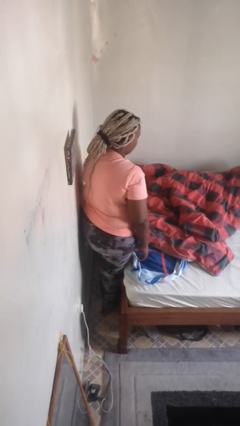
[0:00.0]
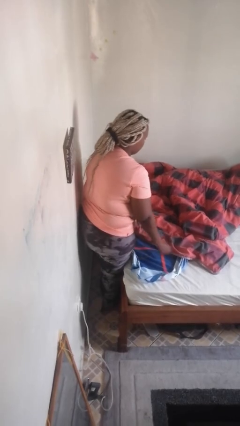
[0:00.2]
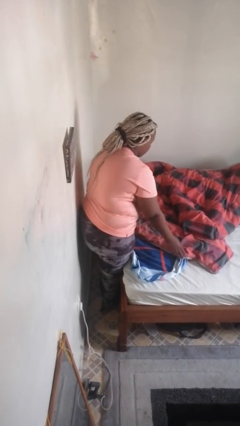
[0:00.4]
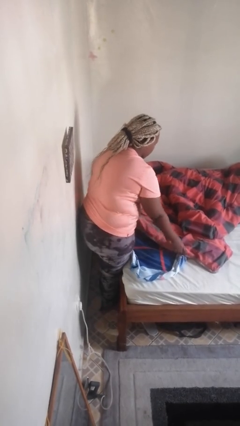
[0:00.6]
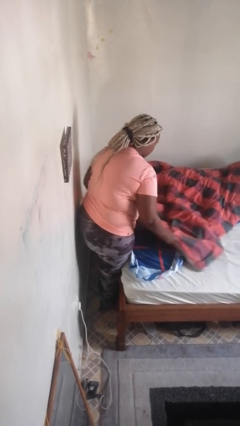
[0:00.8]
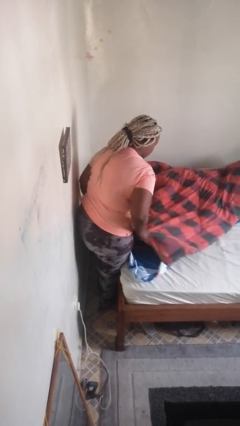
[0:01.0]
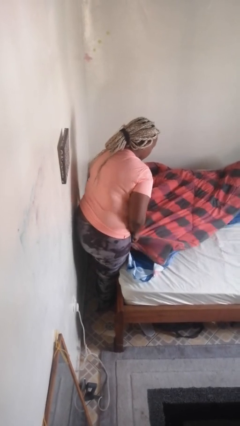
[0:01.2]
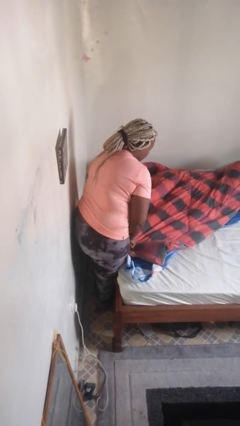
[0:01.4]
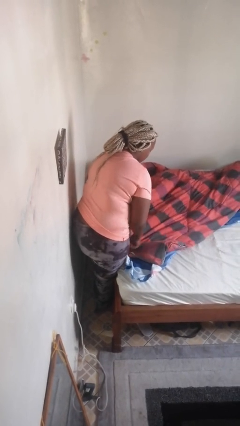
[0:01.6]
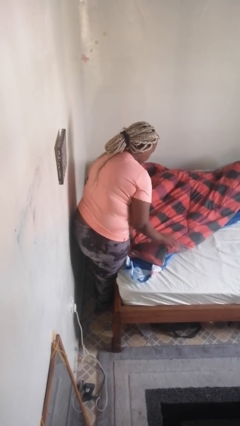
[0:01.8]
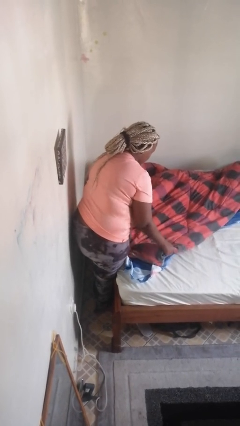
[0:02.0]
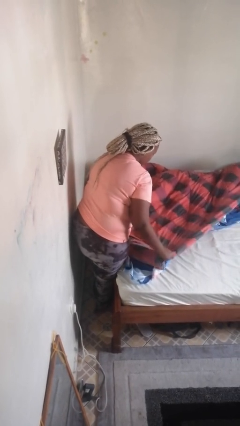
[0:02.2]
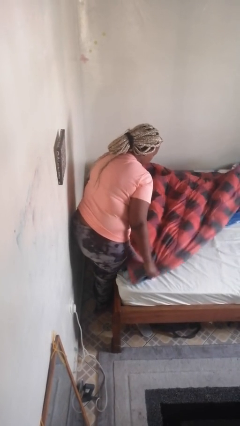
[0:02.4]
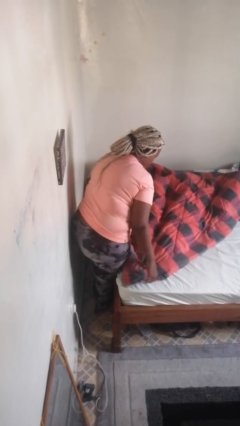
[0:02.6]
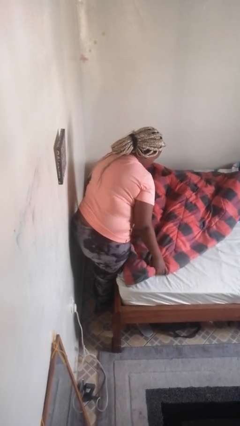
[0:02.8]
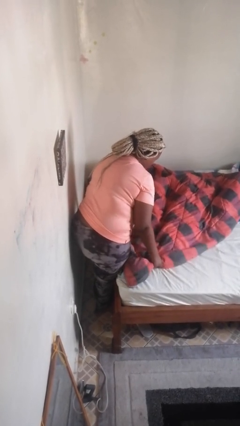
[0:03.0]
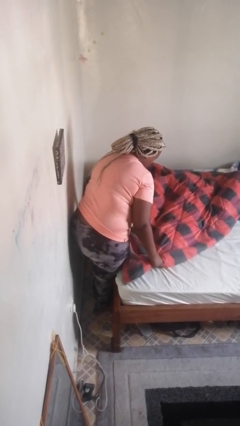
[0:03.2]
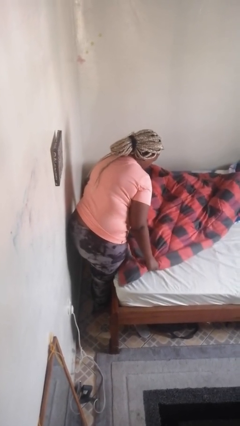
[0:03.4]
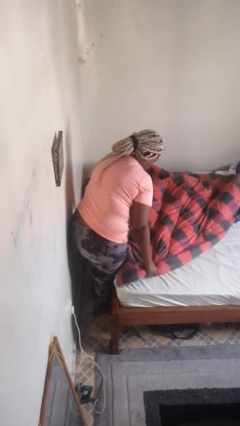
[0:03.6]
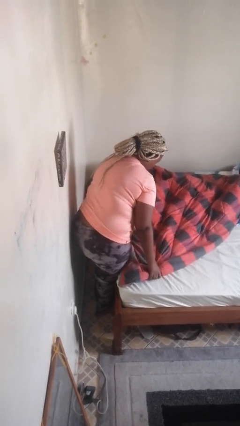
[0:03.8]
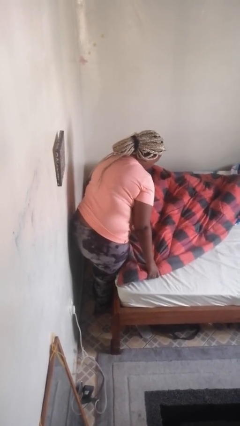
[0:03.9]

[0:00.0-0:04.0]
person makes bed

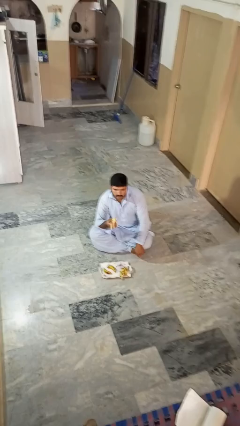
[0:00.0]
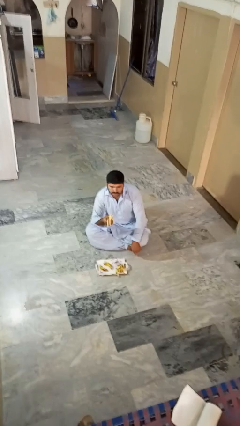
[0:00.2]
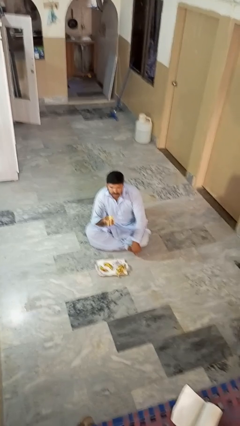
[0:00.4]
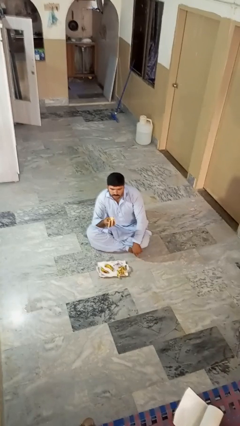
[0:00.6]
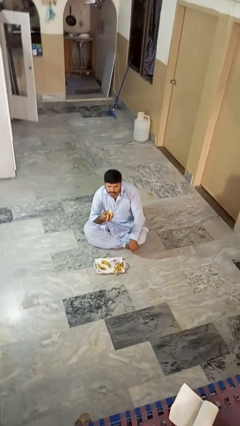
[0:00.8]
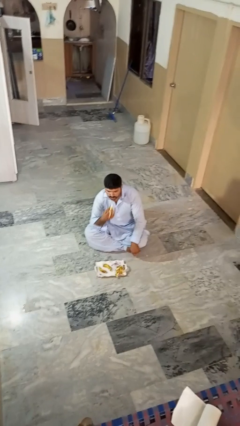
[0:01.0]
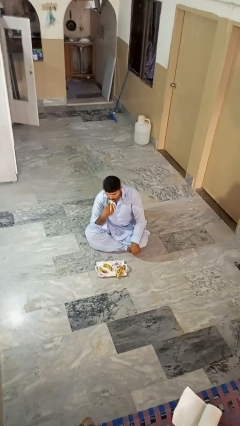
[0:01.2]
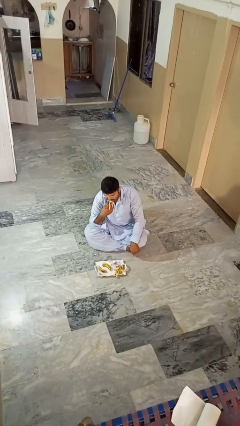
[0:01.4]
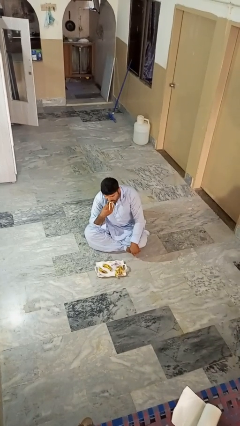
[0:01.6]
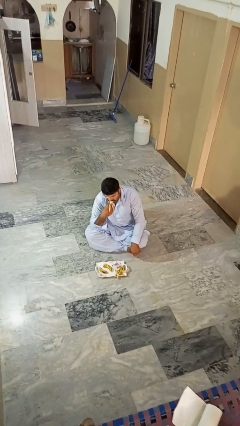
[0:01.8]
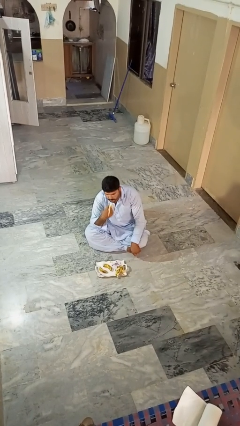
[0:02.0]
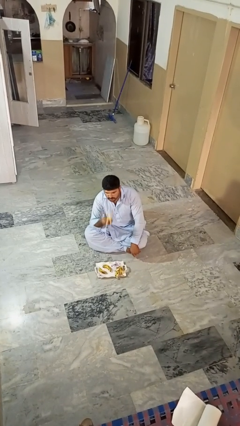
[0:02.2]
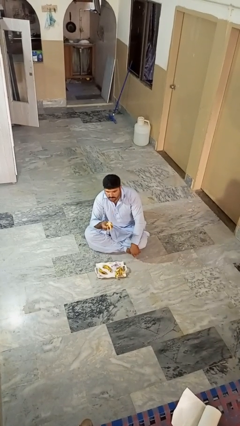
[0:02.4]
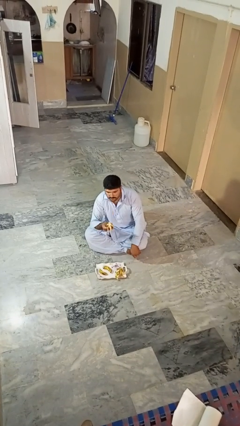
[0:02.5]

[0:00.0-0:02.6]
person eats banana

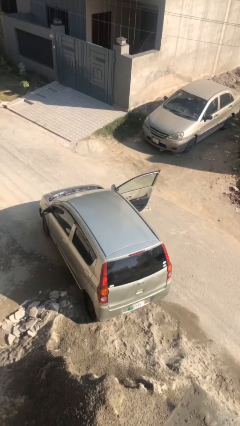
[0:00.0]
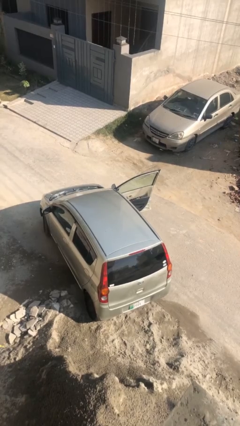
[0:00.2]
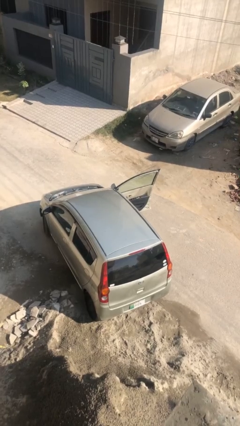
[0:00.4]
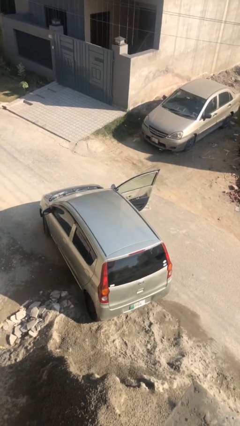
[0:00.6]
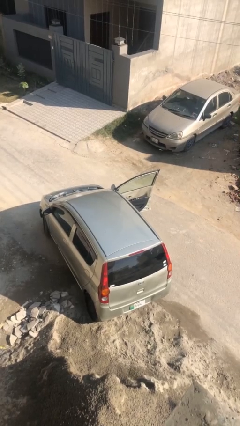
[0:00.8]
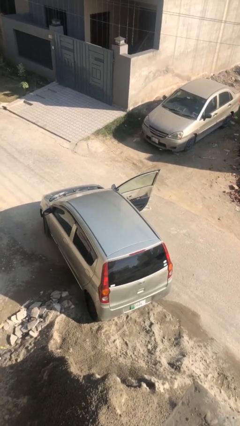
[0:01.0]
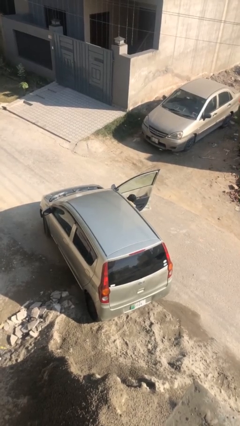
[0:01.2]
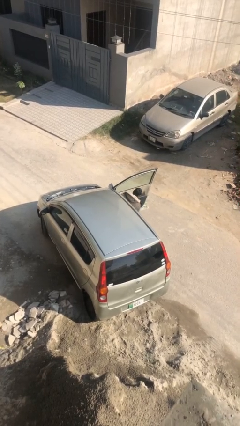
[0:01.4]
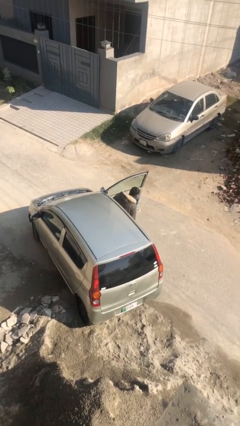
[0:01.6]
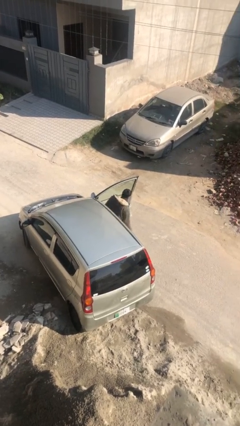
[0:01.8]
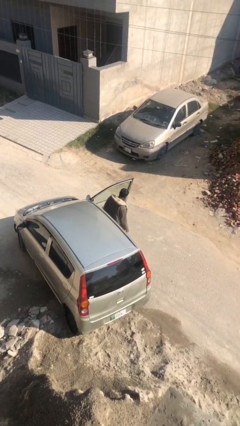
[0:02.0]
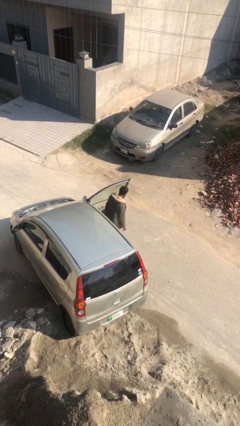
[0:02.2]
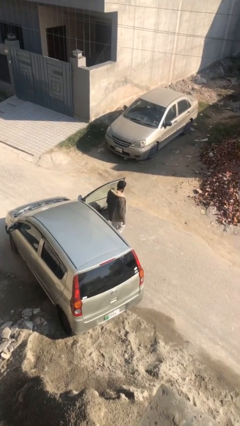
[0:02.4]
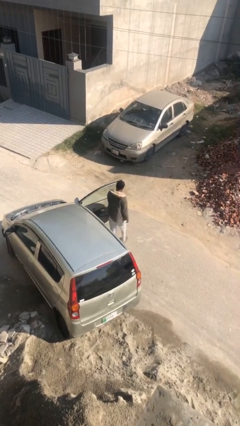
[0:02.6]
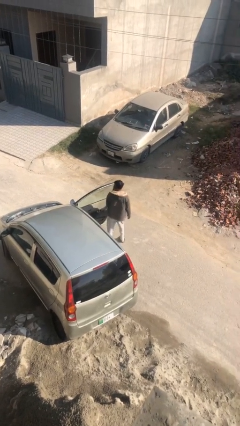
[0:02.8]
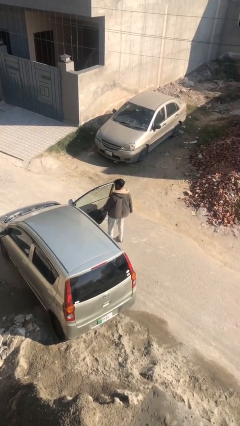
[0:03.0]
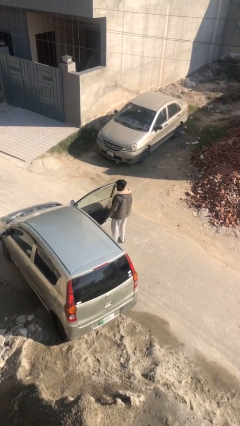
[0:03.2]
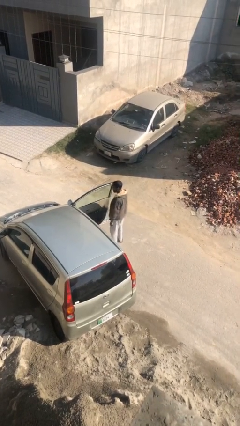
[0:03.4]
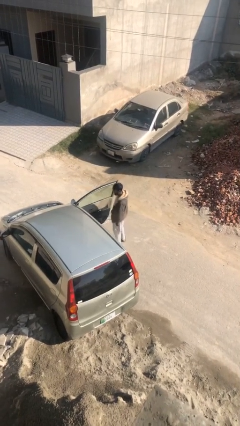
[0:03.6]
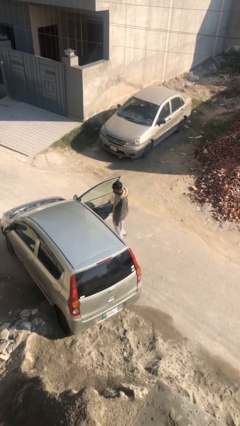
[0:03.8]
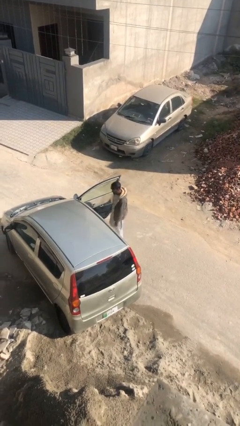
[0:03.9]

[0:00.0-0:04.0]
person exits car

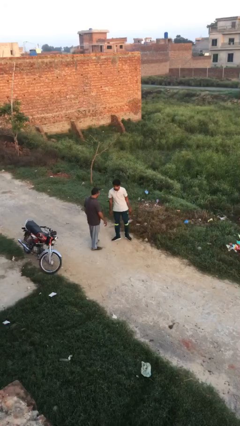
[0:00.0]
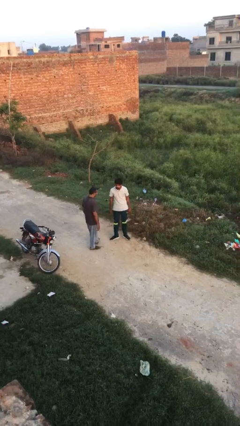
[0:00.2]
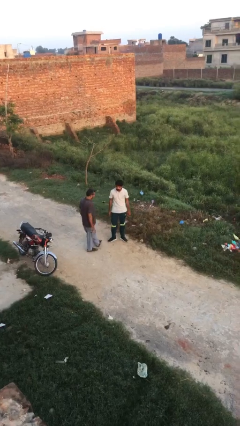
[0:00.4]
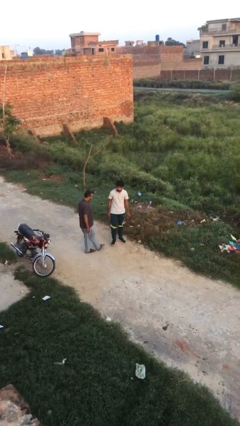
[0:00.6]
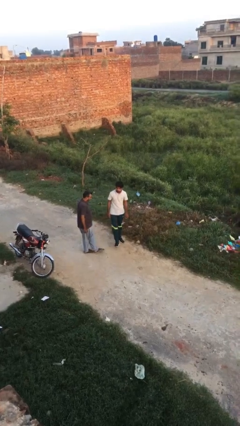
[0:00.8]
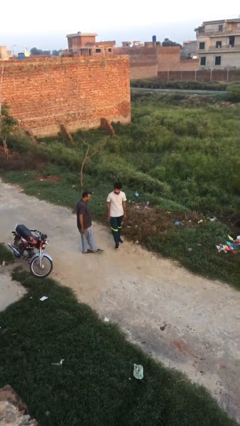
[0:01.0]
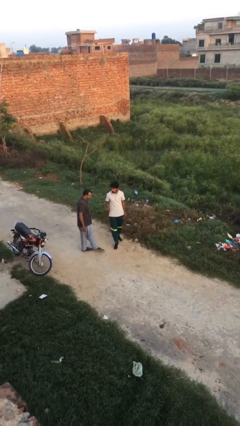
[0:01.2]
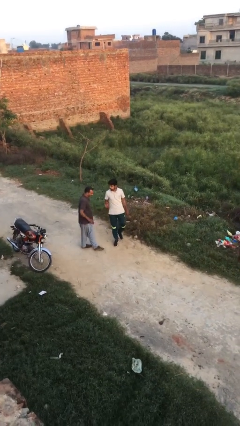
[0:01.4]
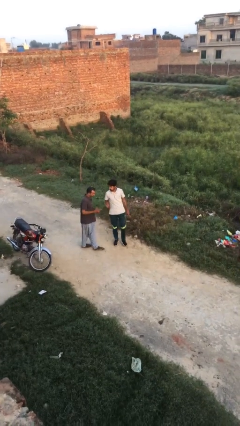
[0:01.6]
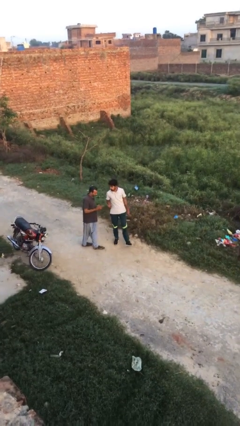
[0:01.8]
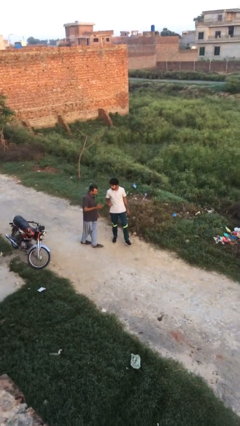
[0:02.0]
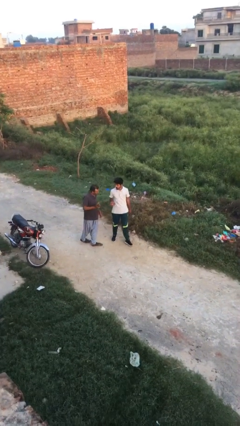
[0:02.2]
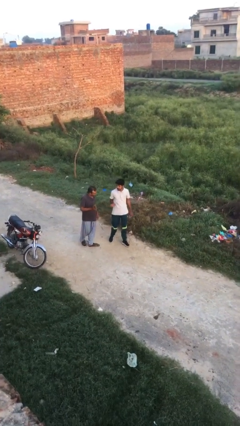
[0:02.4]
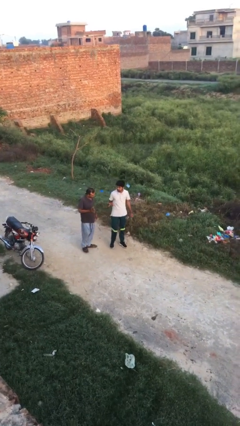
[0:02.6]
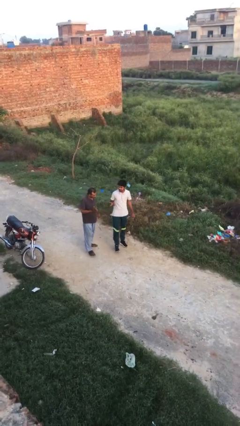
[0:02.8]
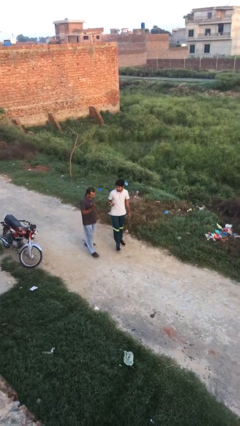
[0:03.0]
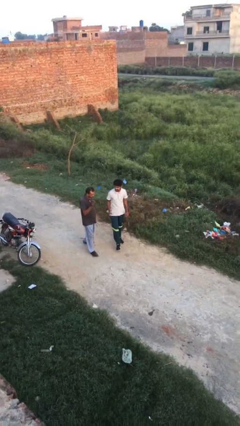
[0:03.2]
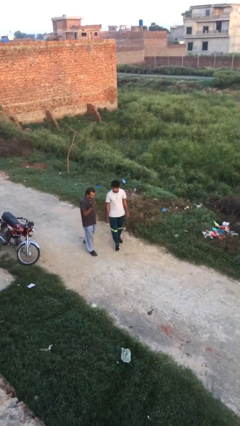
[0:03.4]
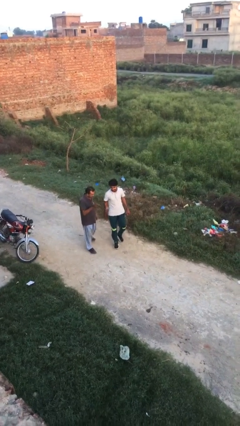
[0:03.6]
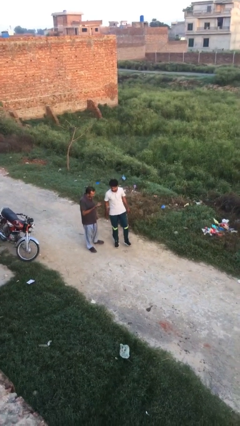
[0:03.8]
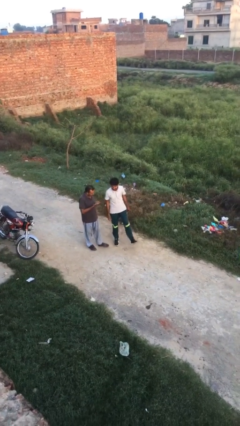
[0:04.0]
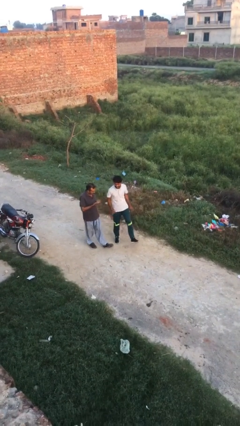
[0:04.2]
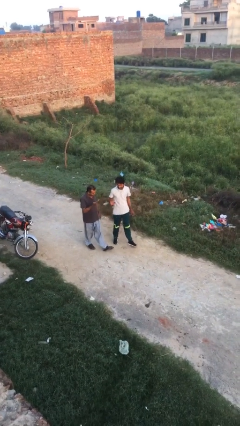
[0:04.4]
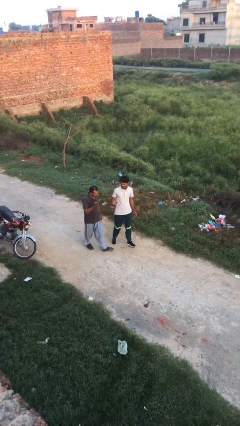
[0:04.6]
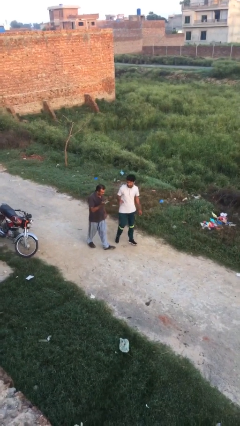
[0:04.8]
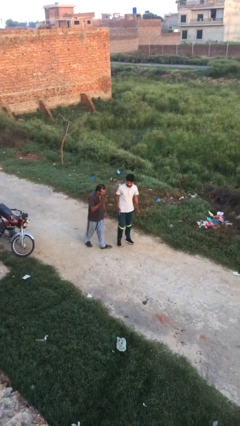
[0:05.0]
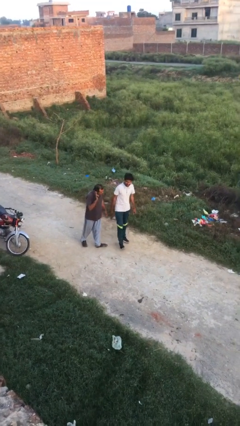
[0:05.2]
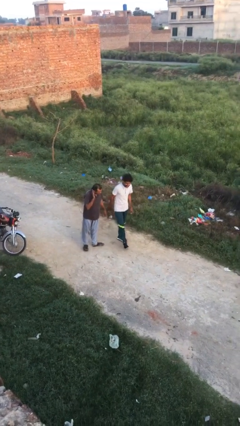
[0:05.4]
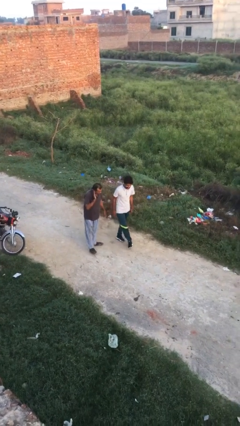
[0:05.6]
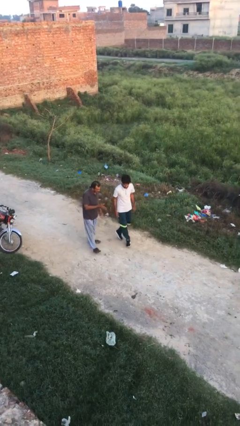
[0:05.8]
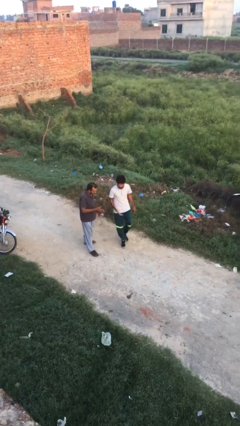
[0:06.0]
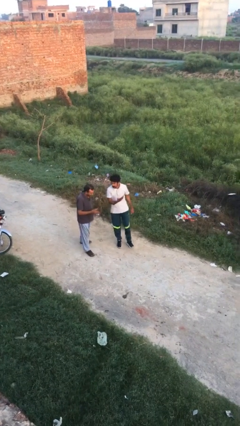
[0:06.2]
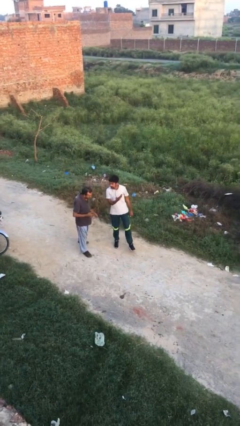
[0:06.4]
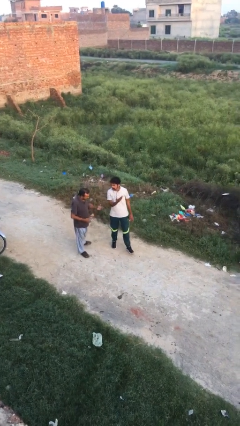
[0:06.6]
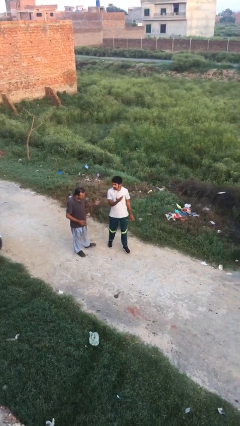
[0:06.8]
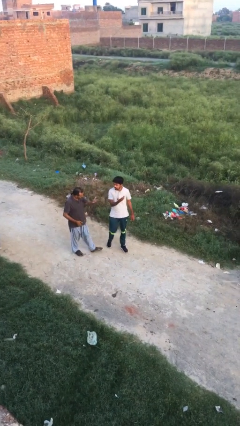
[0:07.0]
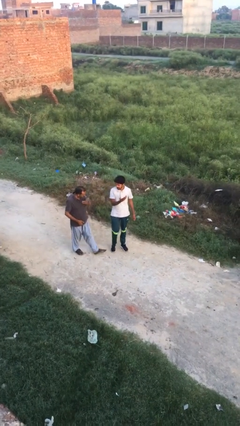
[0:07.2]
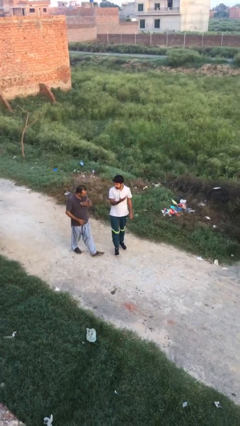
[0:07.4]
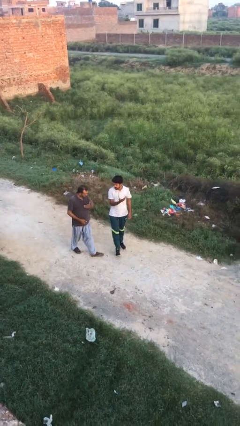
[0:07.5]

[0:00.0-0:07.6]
person talks to person
